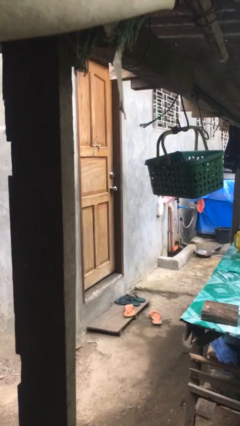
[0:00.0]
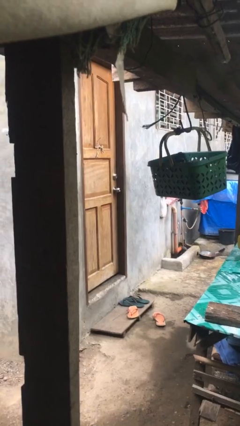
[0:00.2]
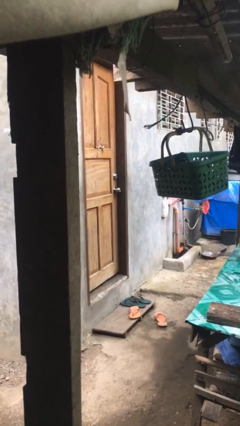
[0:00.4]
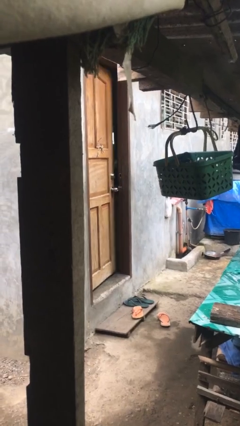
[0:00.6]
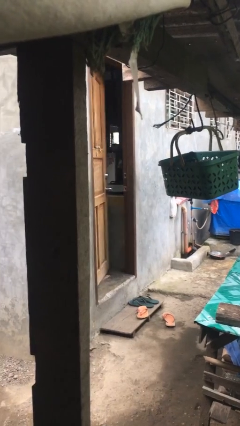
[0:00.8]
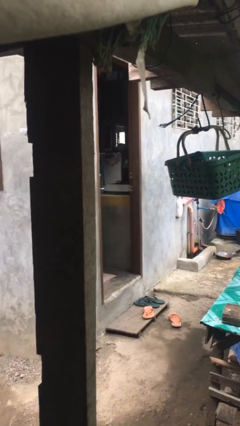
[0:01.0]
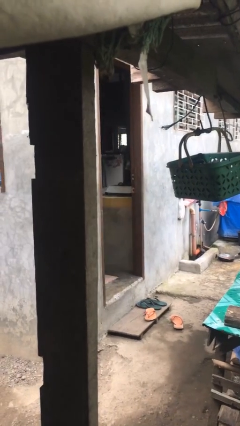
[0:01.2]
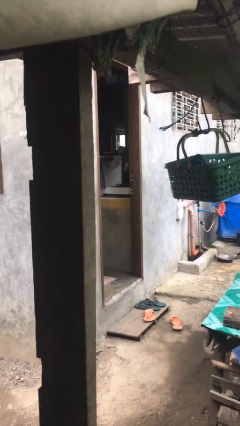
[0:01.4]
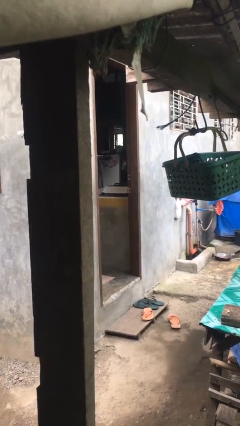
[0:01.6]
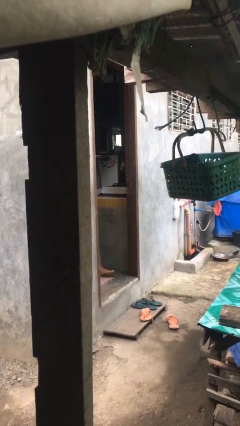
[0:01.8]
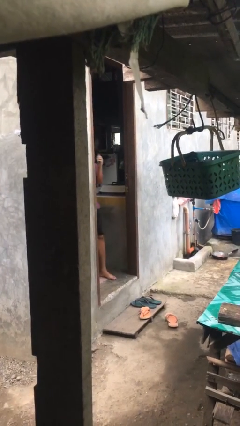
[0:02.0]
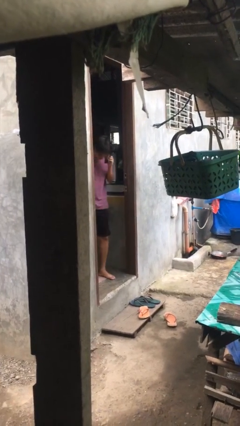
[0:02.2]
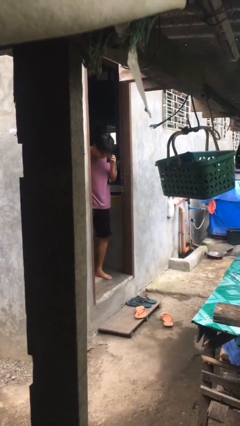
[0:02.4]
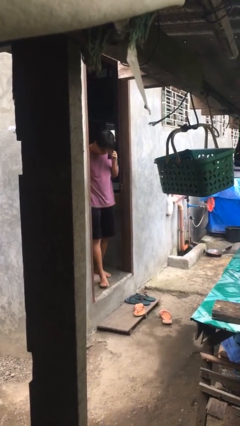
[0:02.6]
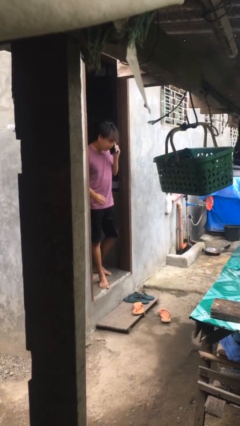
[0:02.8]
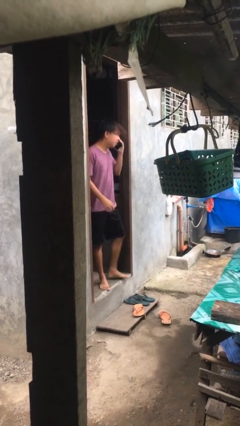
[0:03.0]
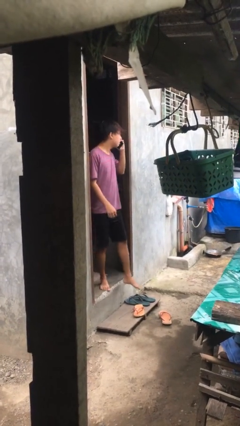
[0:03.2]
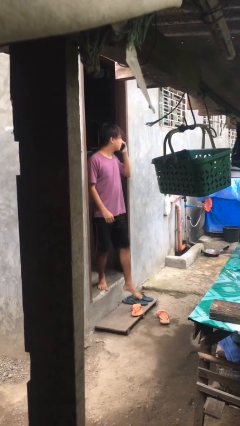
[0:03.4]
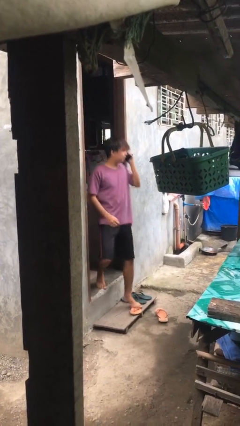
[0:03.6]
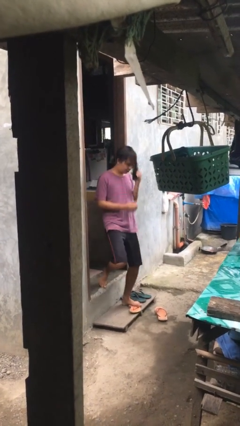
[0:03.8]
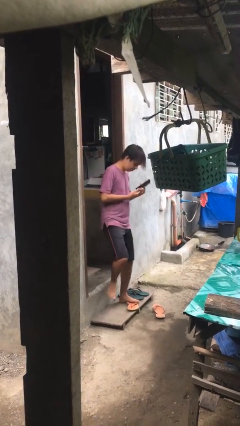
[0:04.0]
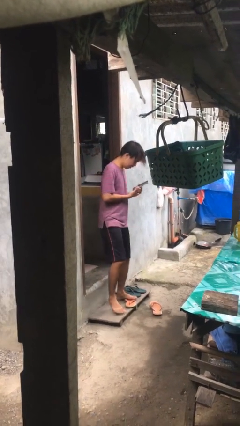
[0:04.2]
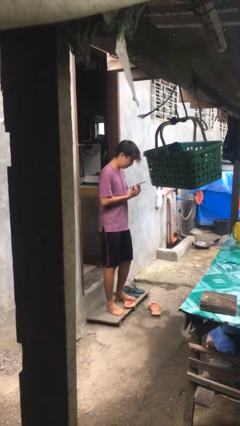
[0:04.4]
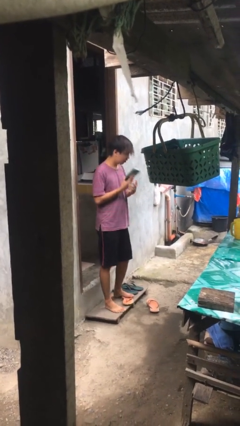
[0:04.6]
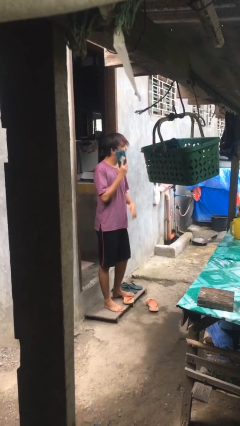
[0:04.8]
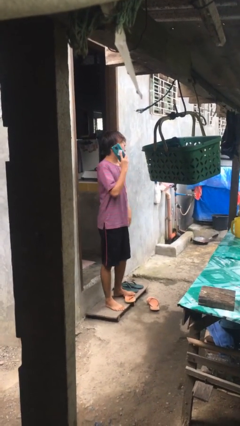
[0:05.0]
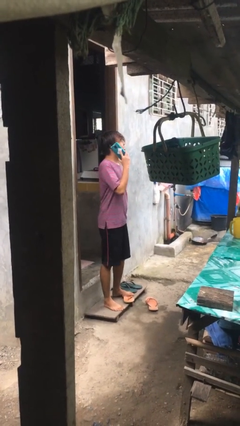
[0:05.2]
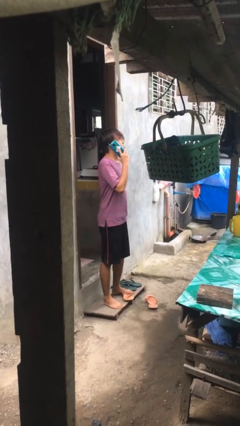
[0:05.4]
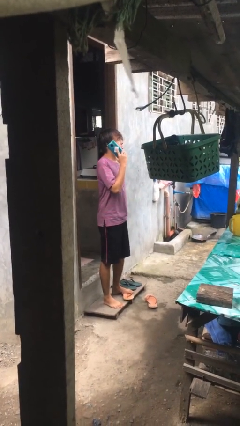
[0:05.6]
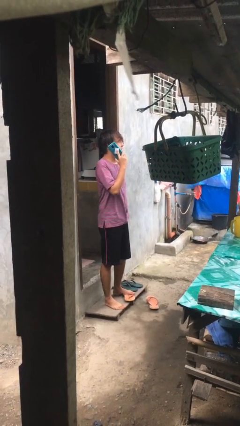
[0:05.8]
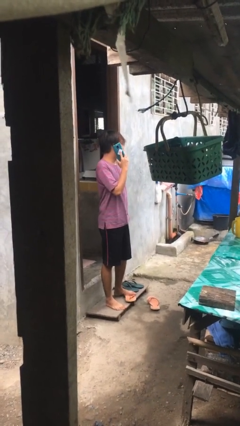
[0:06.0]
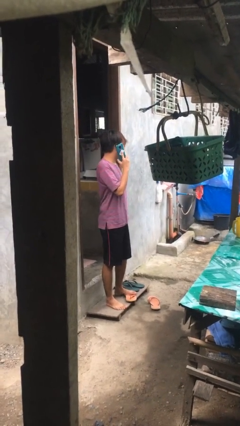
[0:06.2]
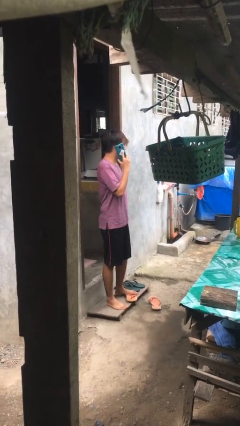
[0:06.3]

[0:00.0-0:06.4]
person enters scene through structure

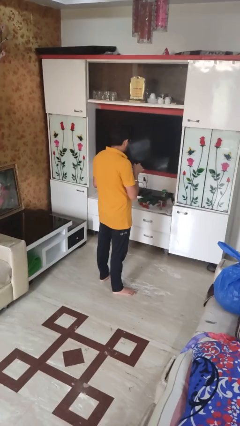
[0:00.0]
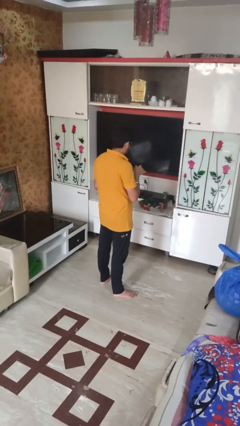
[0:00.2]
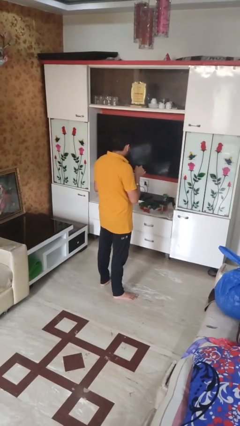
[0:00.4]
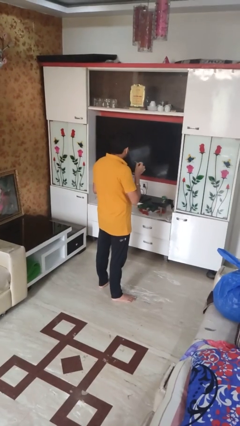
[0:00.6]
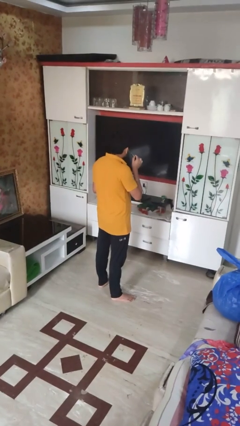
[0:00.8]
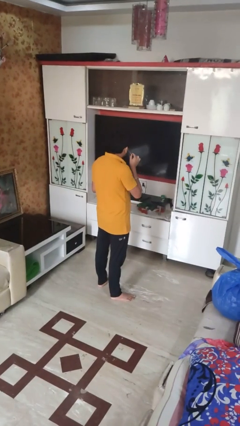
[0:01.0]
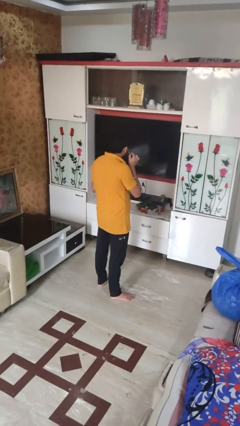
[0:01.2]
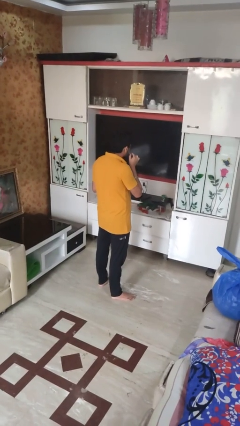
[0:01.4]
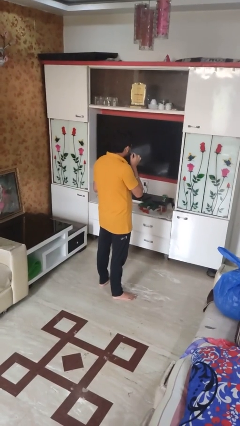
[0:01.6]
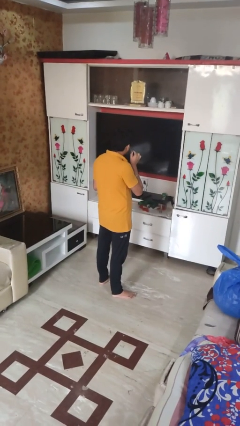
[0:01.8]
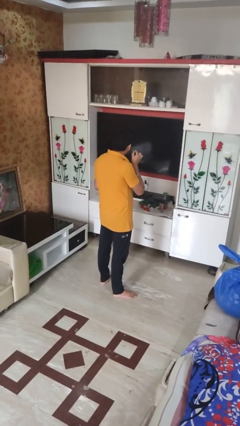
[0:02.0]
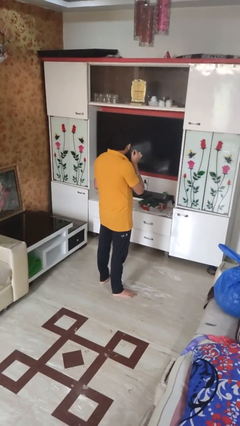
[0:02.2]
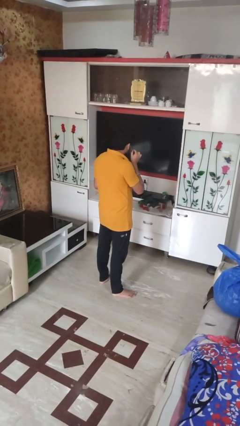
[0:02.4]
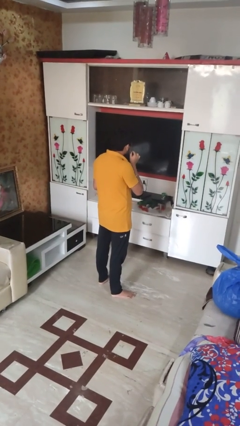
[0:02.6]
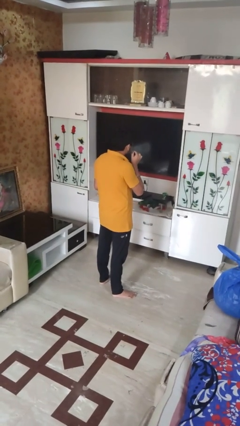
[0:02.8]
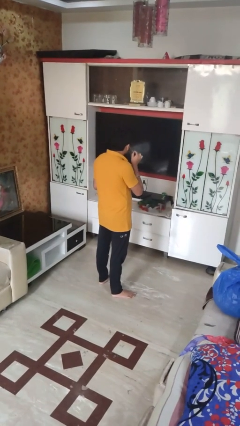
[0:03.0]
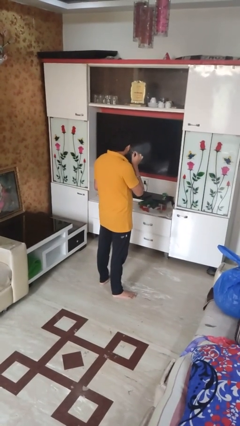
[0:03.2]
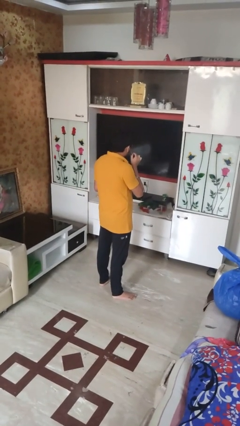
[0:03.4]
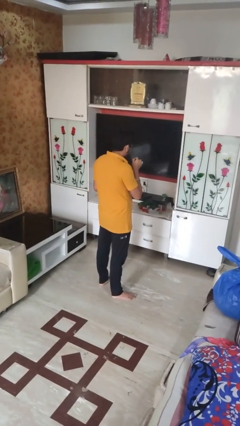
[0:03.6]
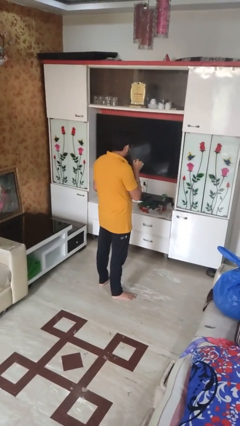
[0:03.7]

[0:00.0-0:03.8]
person applies lip makeup

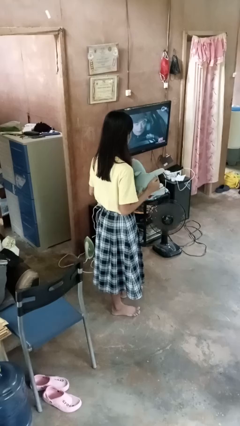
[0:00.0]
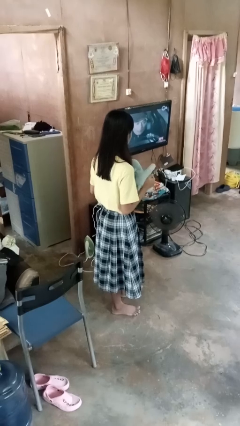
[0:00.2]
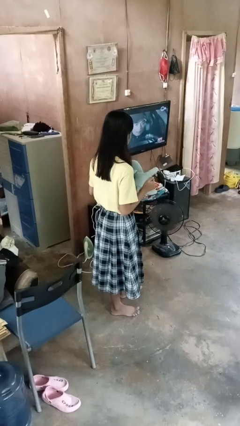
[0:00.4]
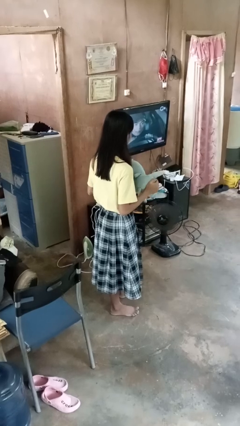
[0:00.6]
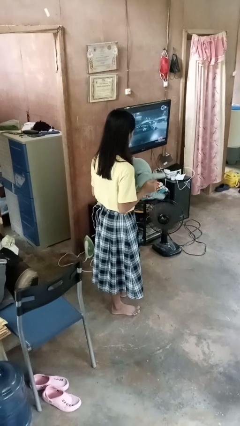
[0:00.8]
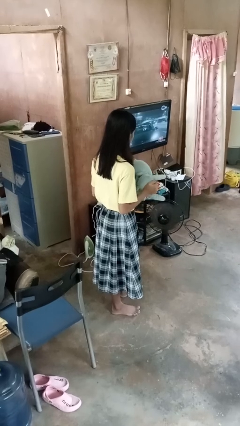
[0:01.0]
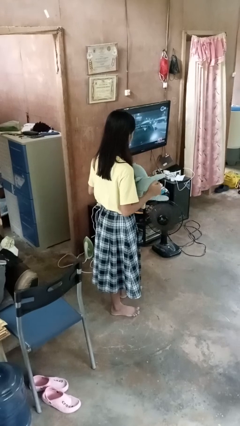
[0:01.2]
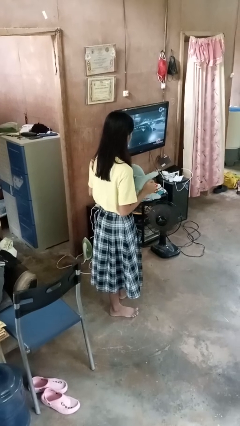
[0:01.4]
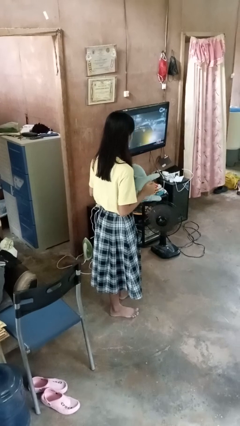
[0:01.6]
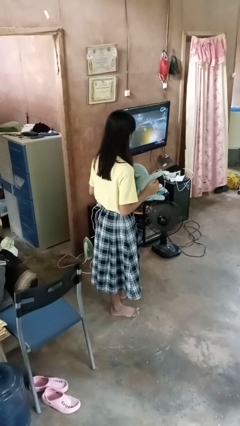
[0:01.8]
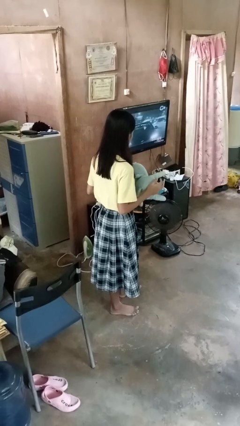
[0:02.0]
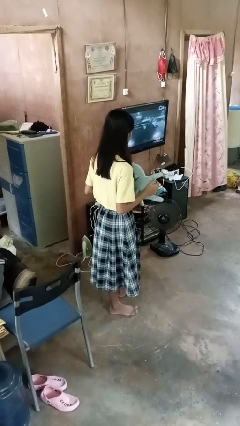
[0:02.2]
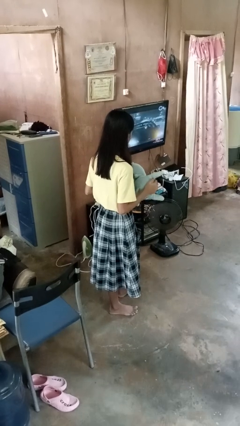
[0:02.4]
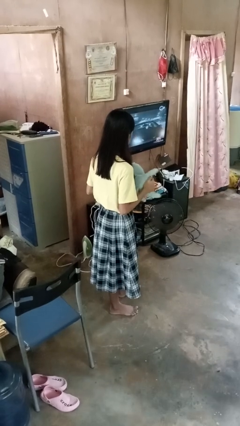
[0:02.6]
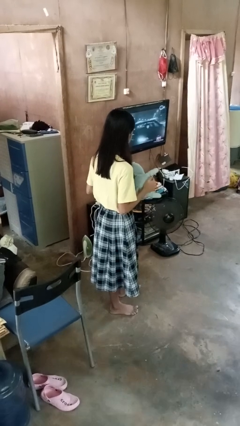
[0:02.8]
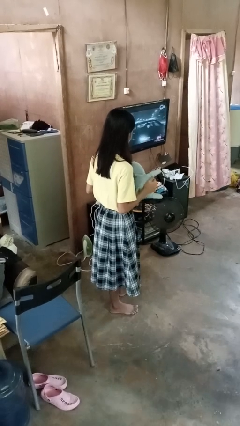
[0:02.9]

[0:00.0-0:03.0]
person squeezes object

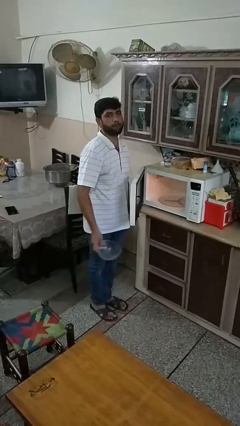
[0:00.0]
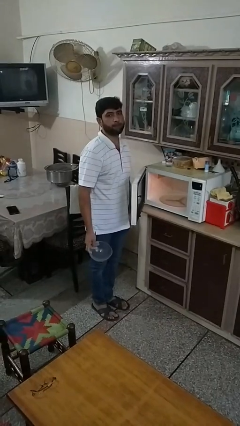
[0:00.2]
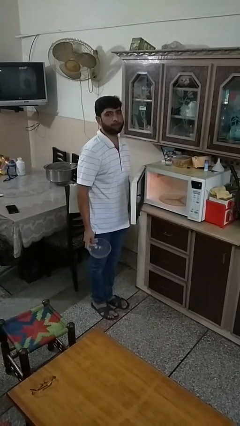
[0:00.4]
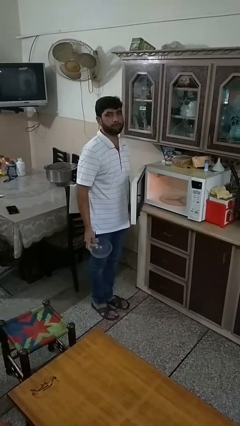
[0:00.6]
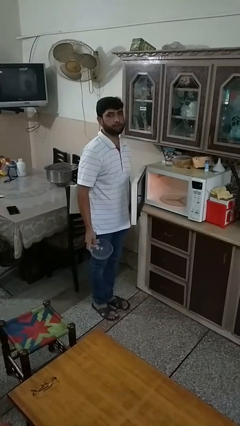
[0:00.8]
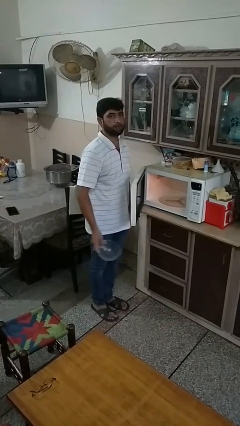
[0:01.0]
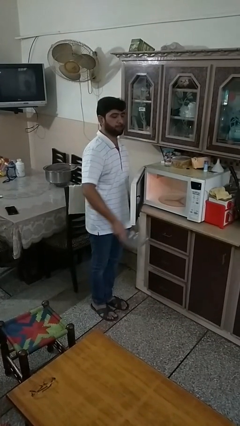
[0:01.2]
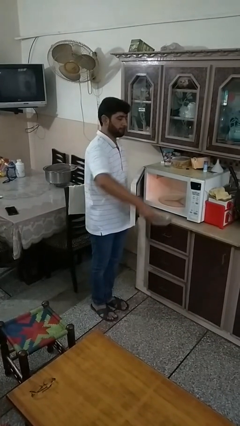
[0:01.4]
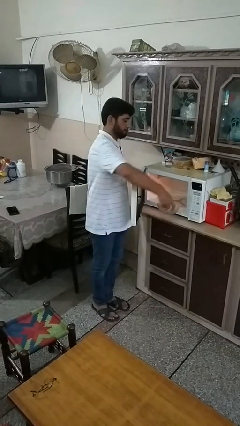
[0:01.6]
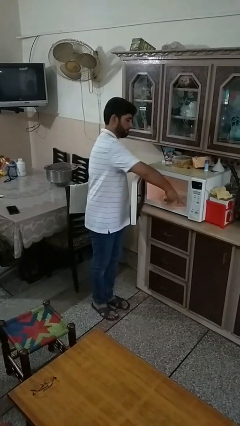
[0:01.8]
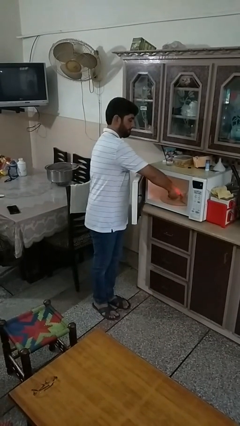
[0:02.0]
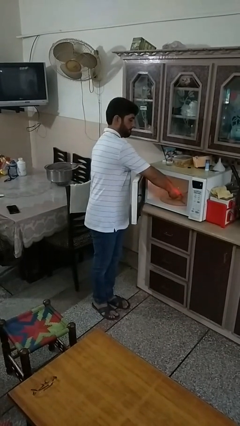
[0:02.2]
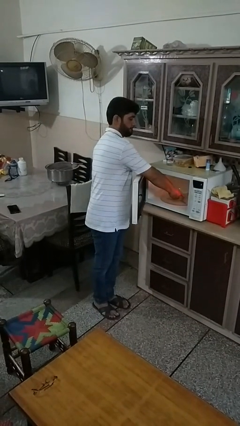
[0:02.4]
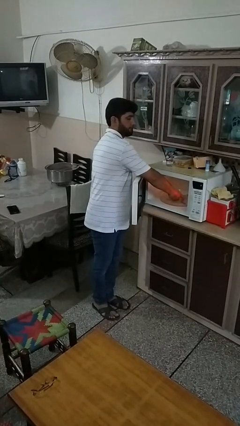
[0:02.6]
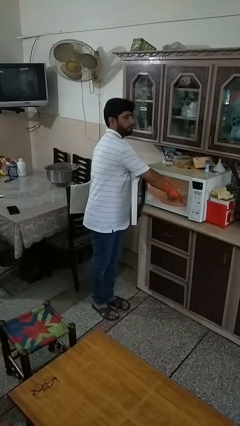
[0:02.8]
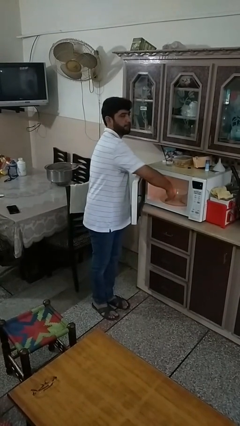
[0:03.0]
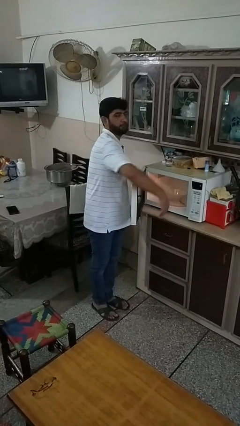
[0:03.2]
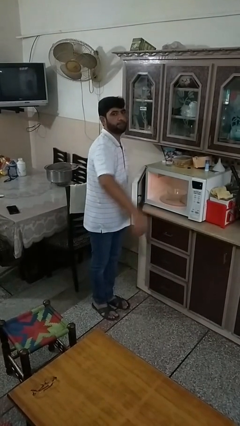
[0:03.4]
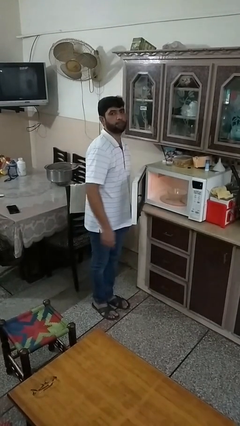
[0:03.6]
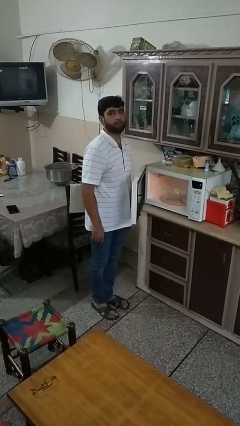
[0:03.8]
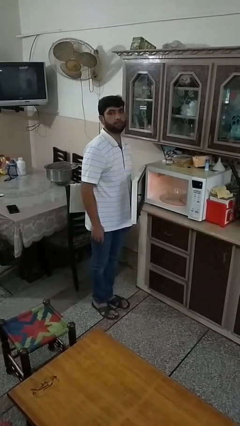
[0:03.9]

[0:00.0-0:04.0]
person puts object into microwave

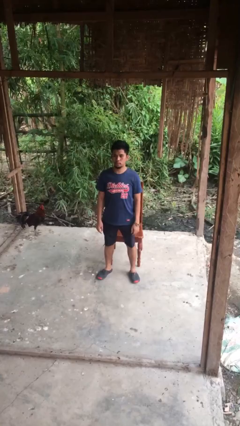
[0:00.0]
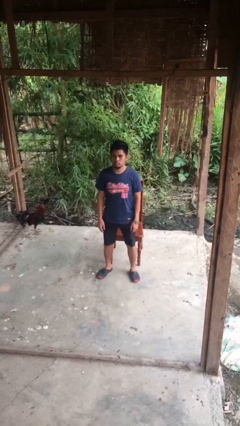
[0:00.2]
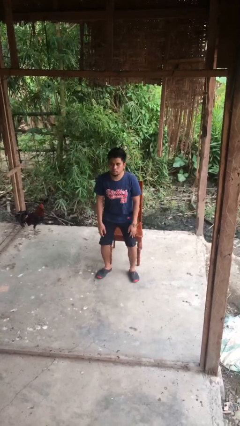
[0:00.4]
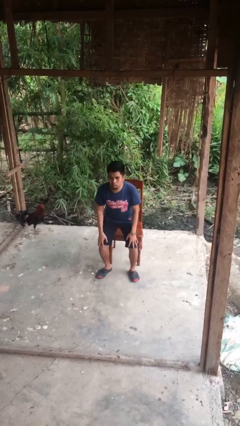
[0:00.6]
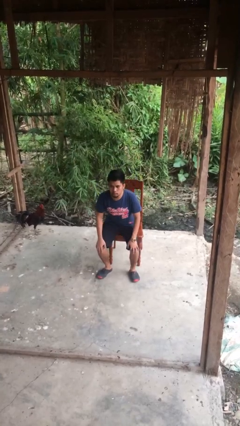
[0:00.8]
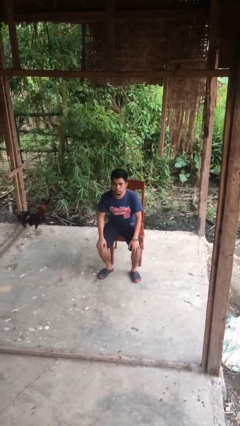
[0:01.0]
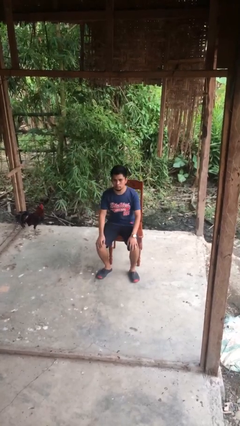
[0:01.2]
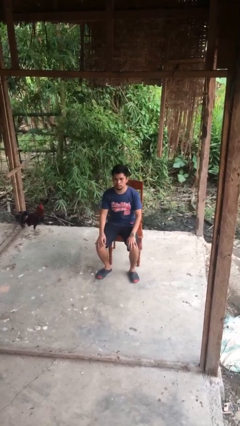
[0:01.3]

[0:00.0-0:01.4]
person sits down
